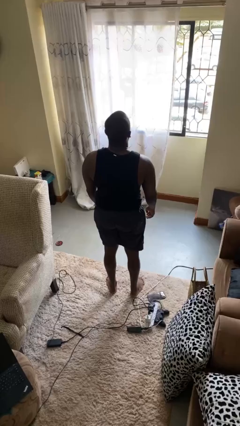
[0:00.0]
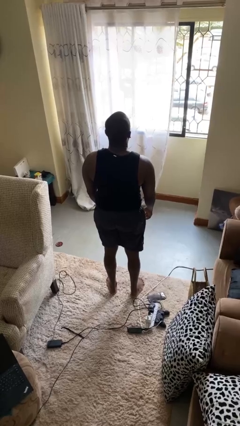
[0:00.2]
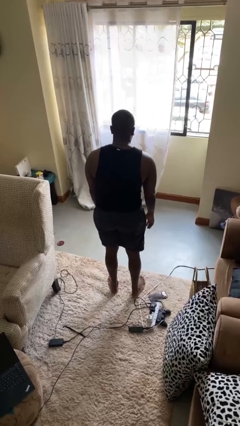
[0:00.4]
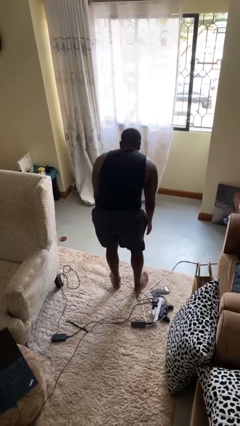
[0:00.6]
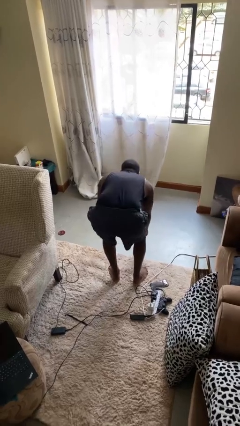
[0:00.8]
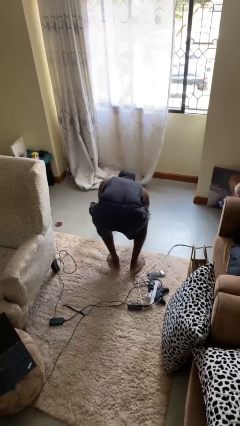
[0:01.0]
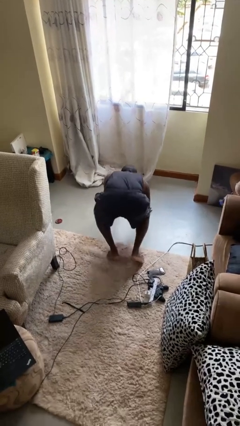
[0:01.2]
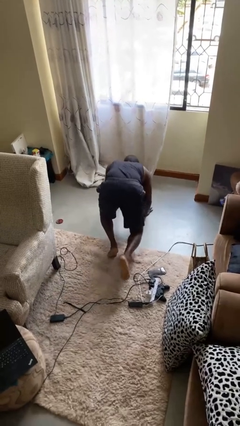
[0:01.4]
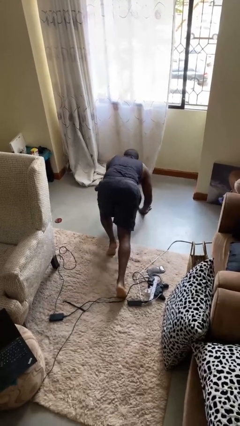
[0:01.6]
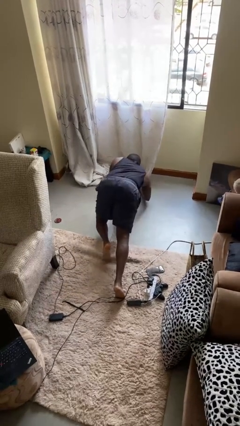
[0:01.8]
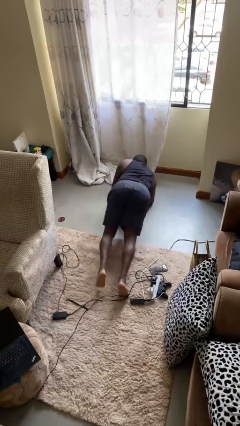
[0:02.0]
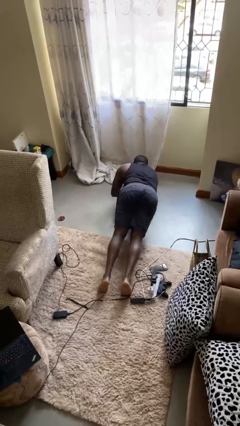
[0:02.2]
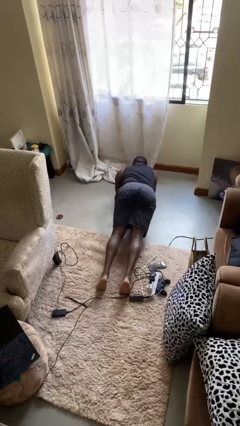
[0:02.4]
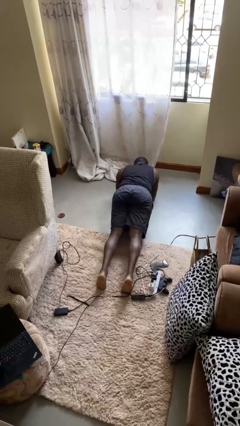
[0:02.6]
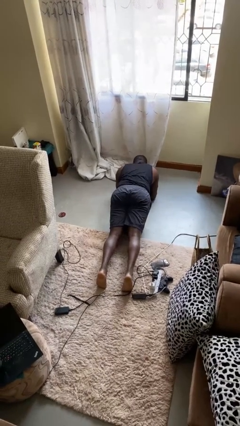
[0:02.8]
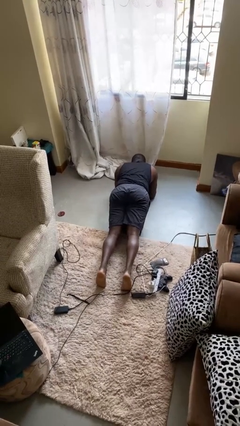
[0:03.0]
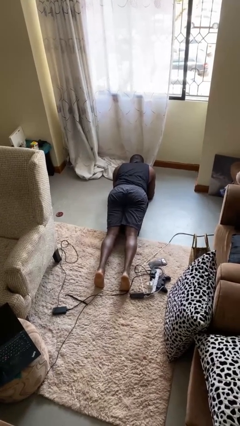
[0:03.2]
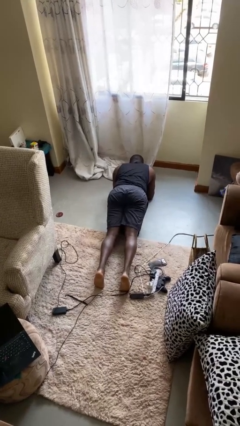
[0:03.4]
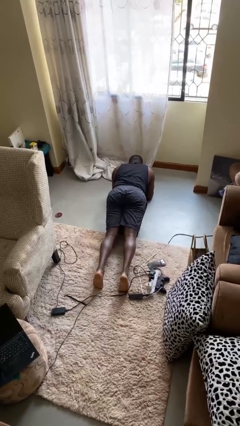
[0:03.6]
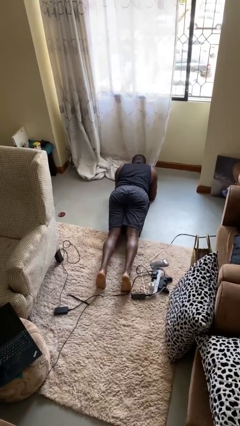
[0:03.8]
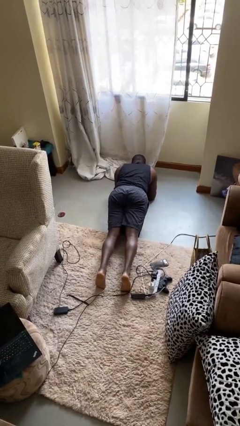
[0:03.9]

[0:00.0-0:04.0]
person exercises with plank

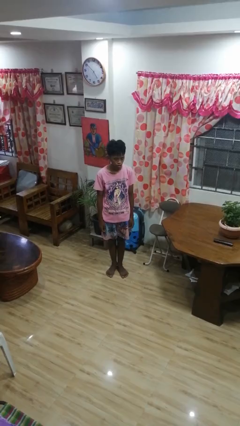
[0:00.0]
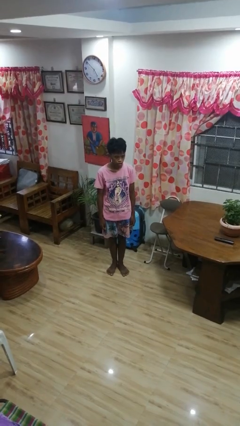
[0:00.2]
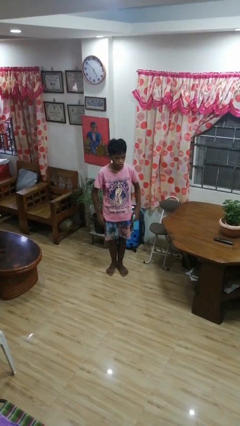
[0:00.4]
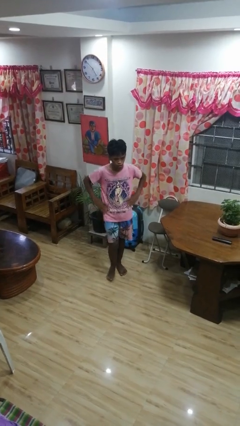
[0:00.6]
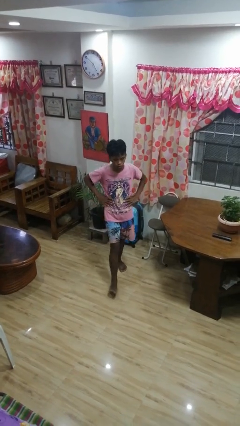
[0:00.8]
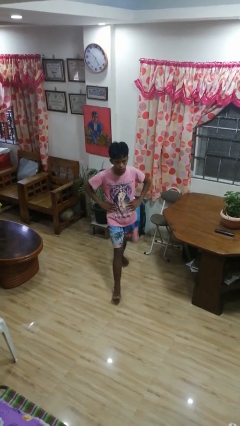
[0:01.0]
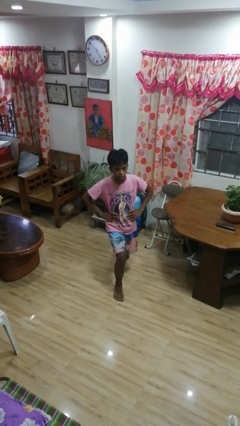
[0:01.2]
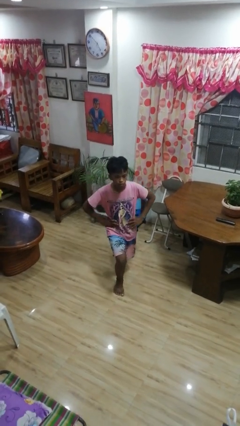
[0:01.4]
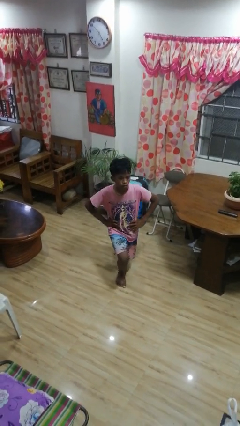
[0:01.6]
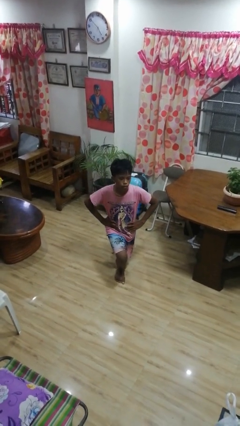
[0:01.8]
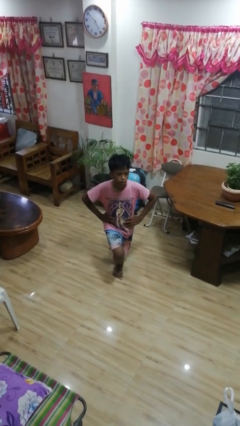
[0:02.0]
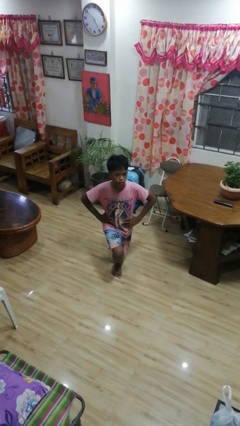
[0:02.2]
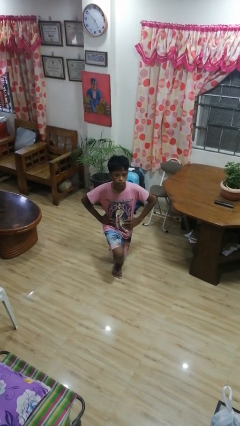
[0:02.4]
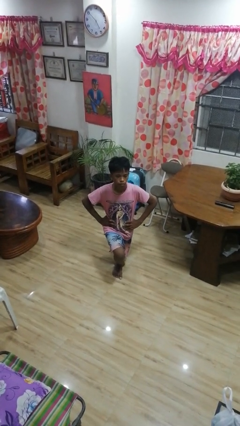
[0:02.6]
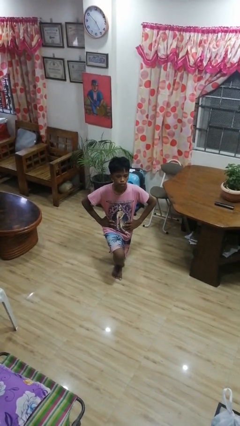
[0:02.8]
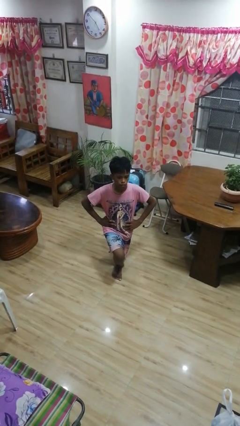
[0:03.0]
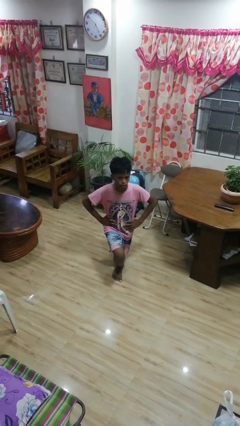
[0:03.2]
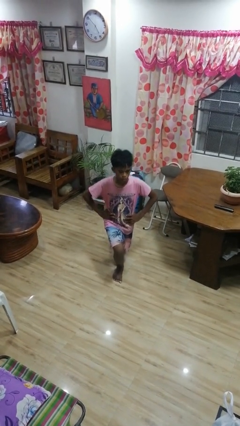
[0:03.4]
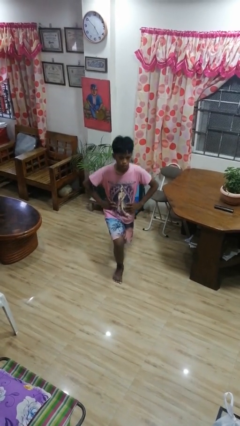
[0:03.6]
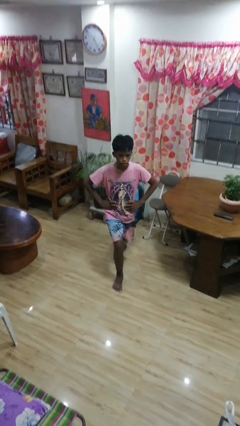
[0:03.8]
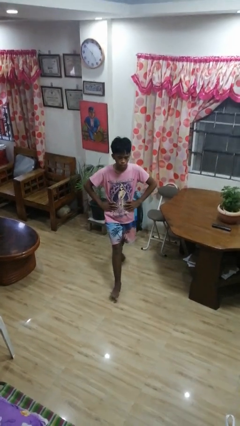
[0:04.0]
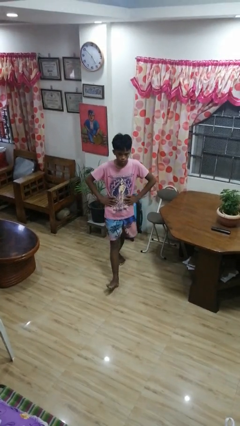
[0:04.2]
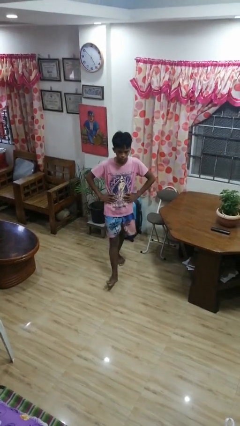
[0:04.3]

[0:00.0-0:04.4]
person exercises with lunges

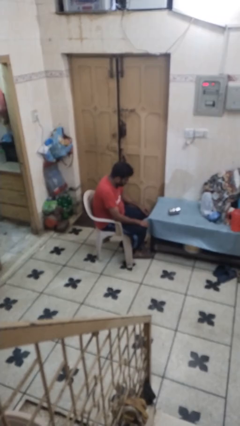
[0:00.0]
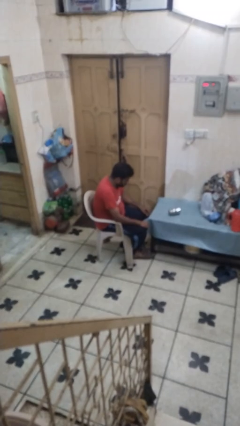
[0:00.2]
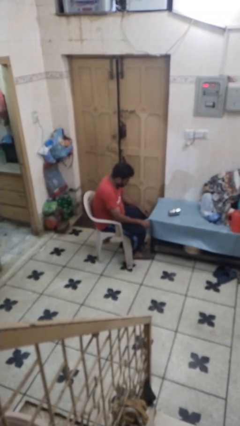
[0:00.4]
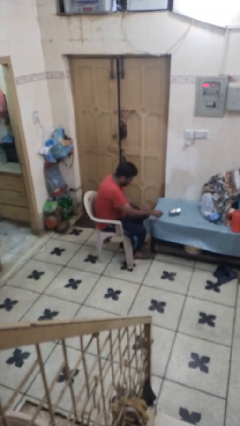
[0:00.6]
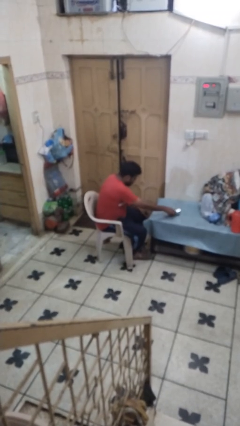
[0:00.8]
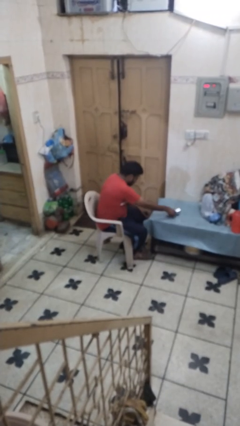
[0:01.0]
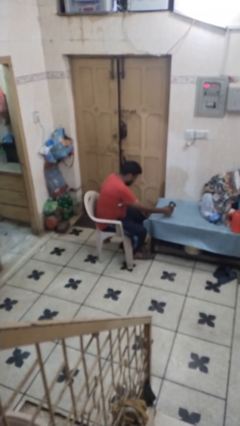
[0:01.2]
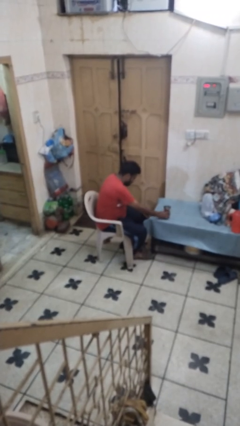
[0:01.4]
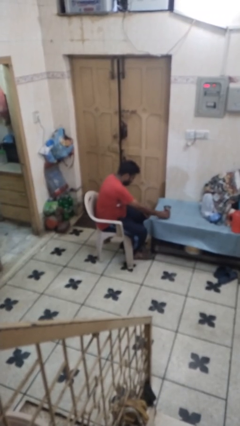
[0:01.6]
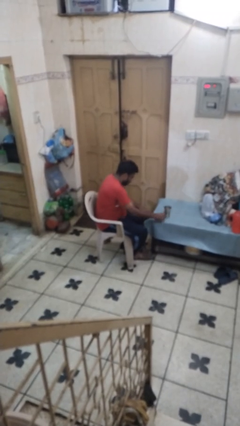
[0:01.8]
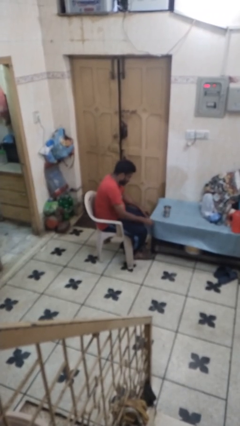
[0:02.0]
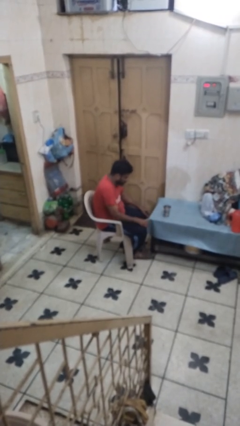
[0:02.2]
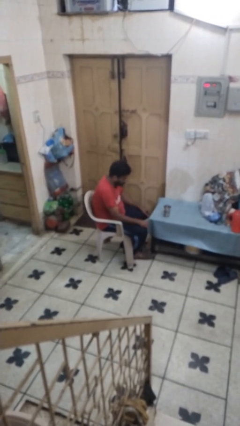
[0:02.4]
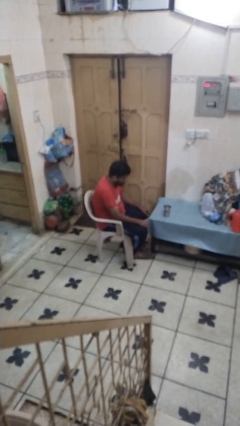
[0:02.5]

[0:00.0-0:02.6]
person sets upright glass

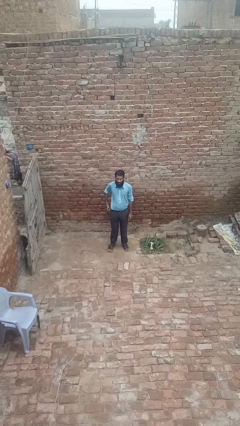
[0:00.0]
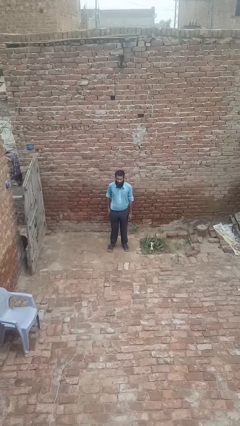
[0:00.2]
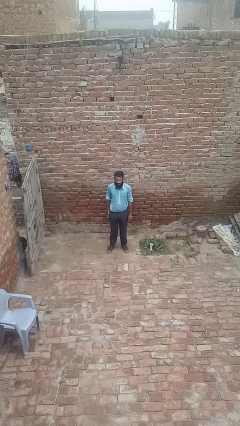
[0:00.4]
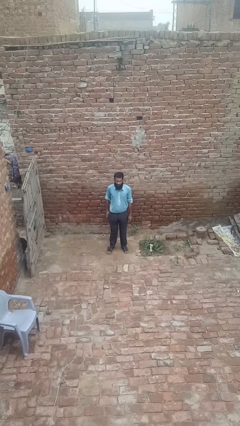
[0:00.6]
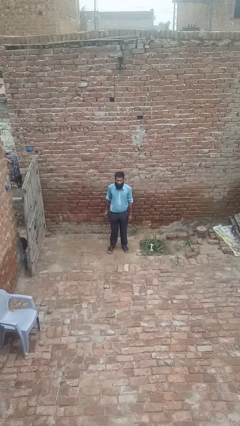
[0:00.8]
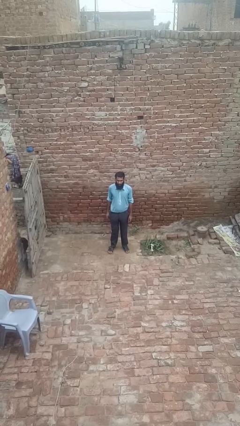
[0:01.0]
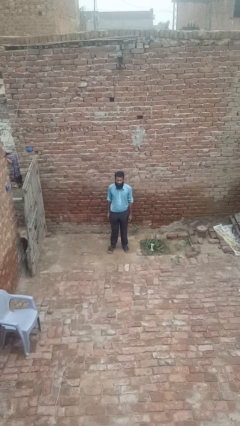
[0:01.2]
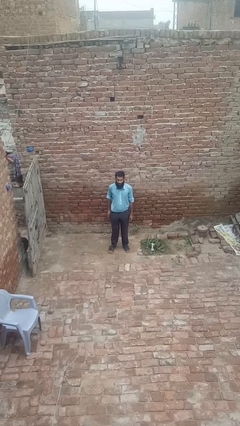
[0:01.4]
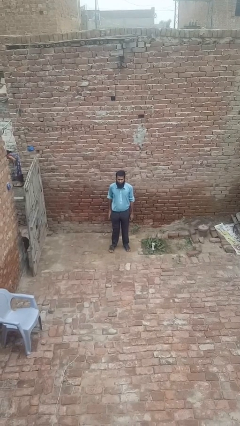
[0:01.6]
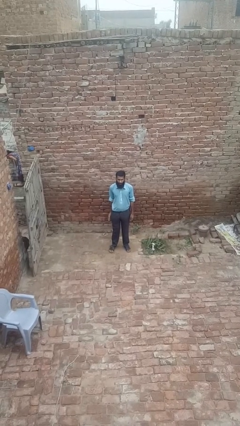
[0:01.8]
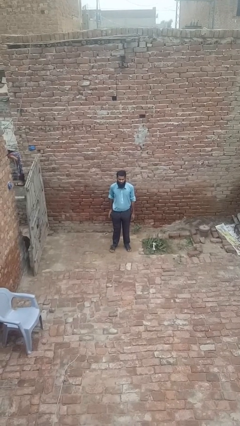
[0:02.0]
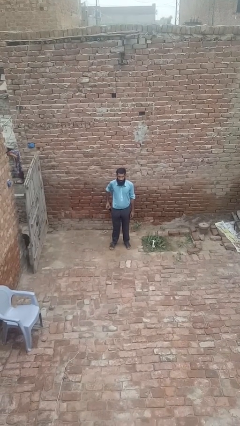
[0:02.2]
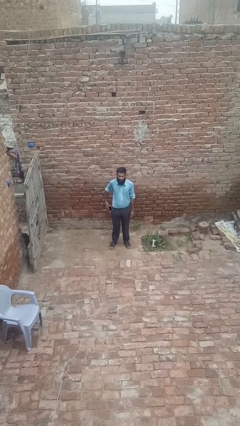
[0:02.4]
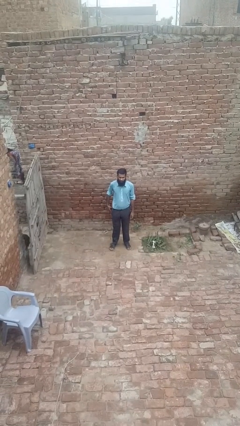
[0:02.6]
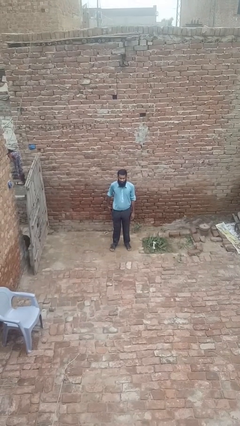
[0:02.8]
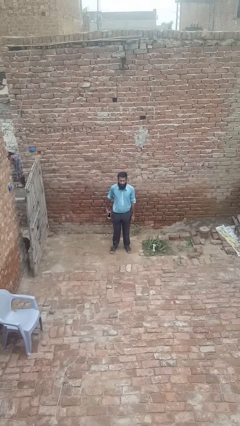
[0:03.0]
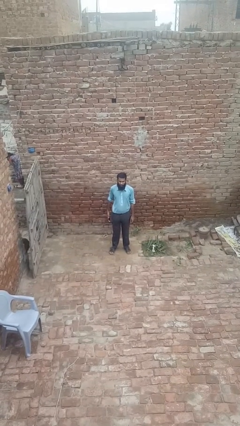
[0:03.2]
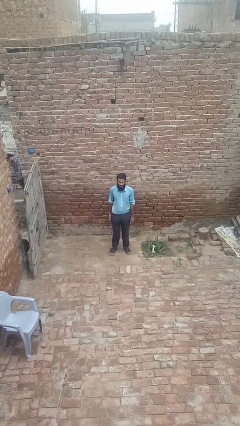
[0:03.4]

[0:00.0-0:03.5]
person takes phone from pocket

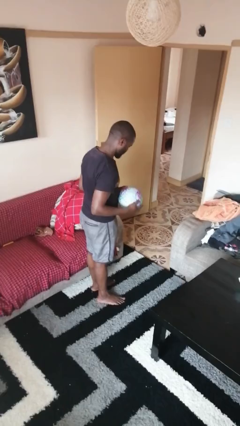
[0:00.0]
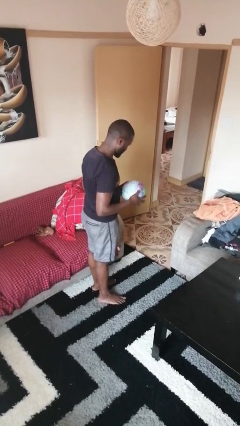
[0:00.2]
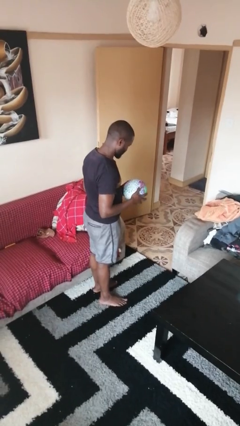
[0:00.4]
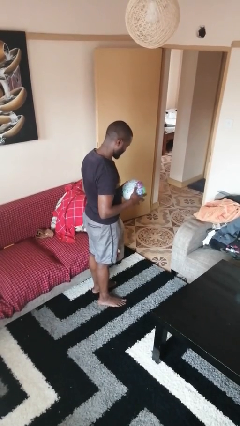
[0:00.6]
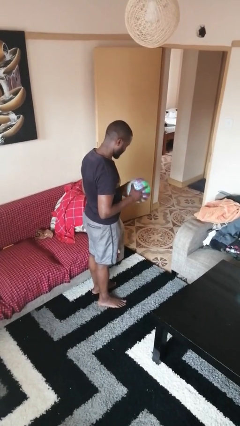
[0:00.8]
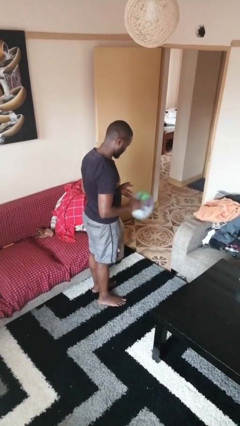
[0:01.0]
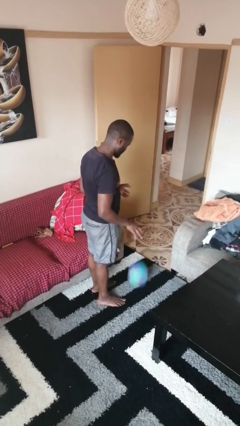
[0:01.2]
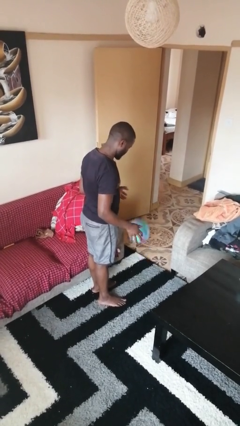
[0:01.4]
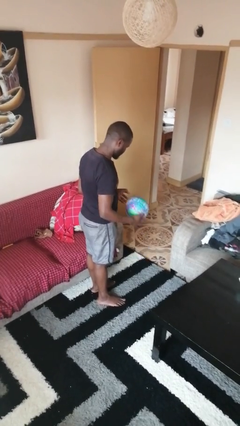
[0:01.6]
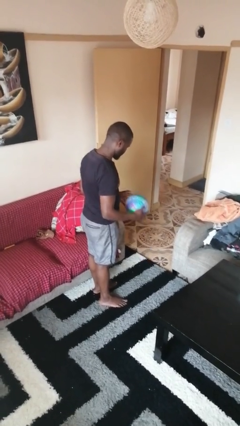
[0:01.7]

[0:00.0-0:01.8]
person bounces ball on floor
